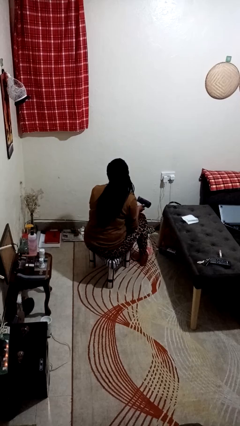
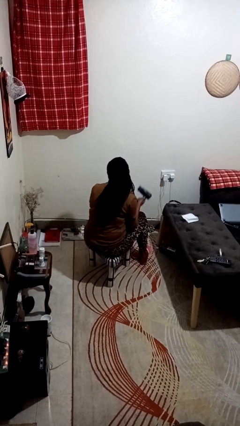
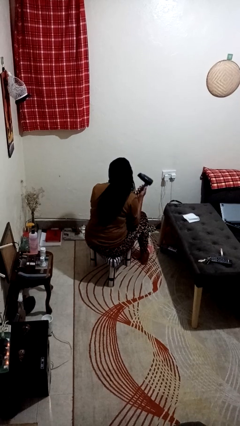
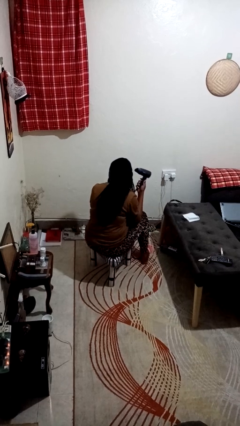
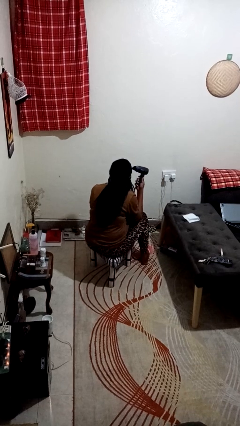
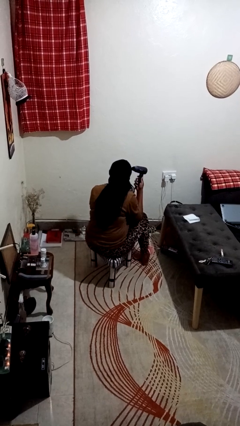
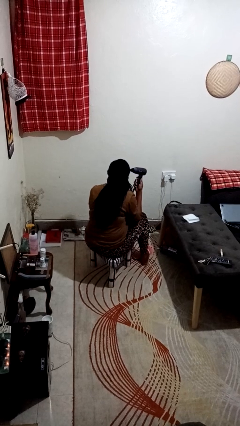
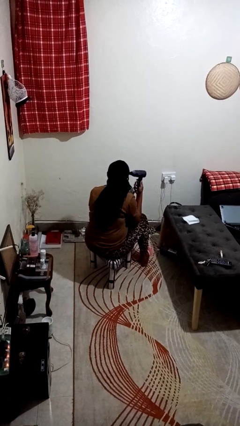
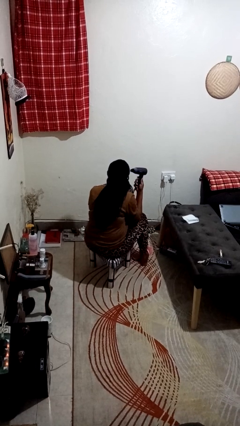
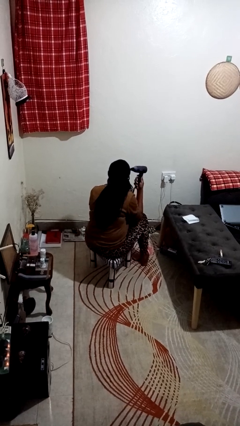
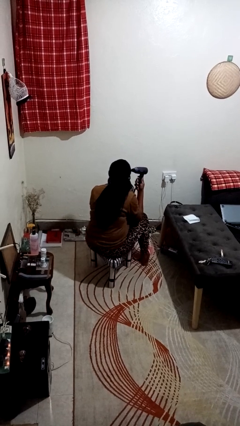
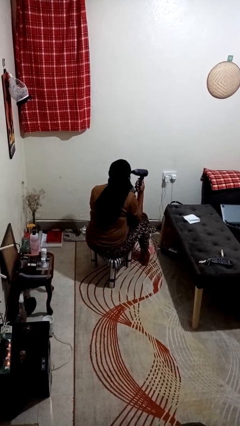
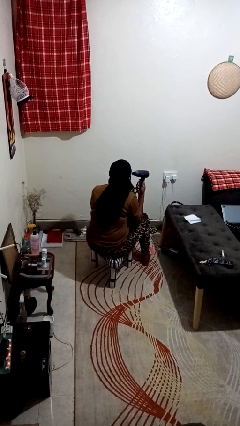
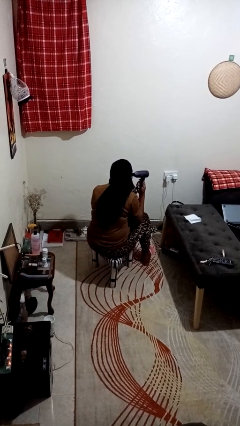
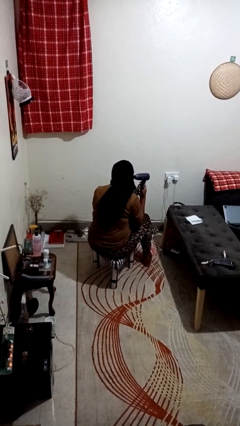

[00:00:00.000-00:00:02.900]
person dries hair with hairdryer

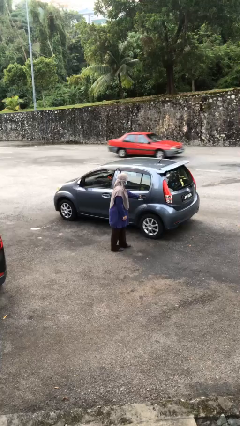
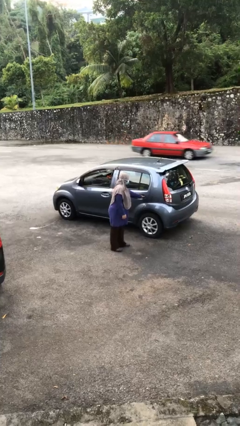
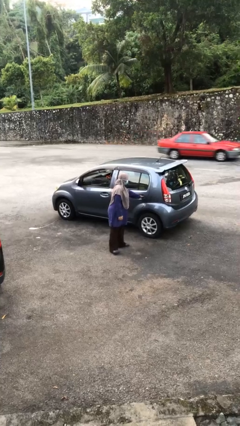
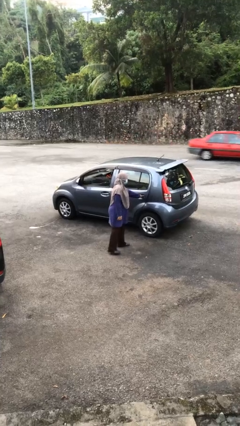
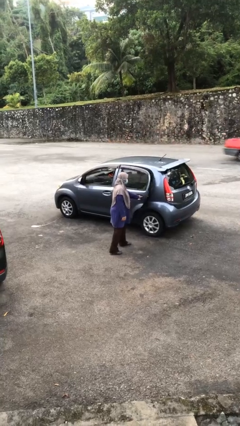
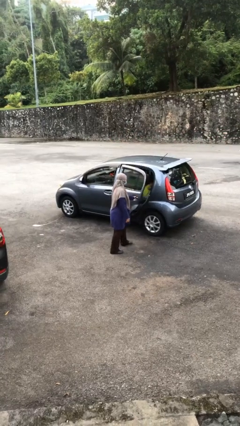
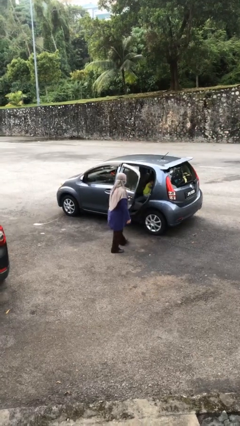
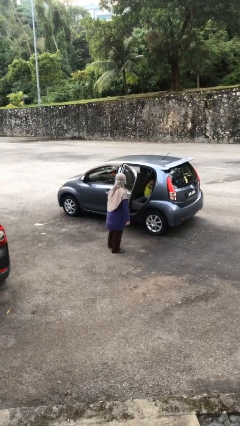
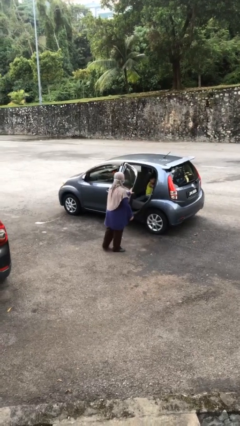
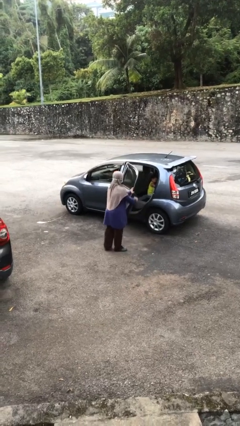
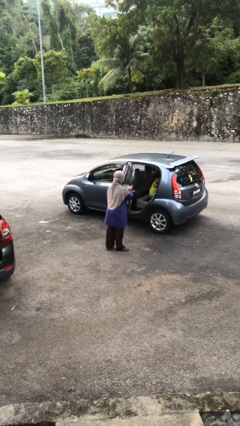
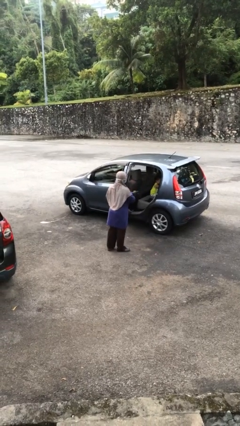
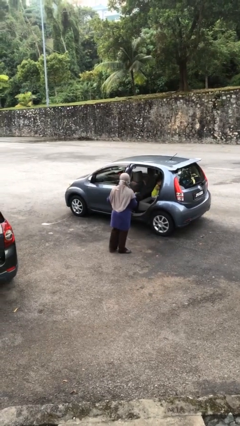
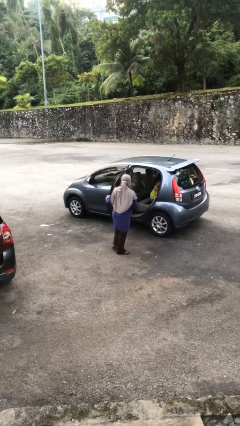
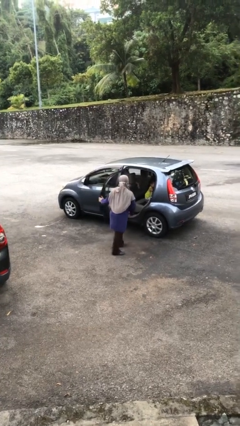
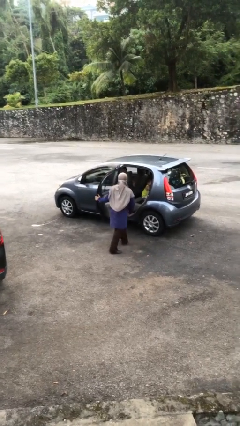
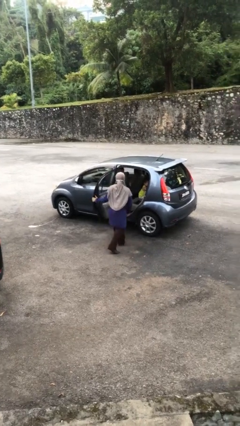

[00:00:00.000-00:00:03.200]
person opens car door

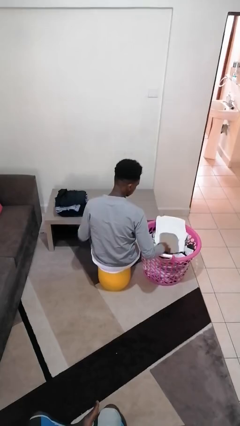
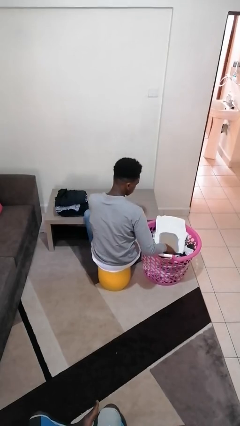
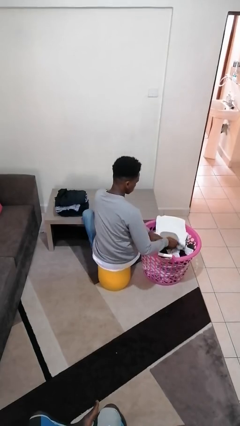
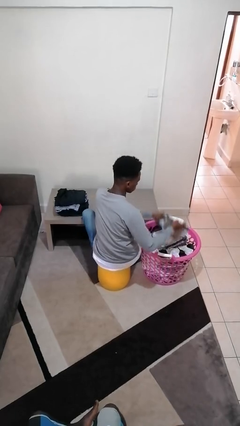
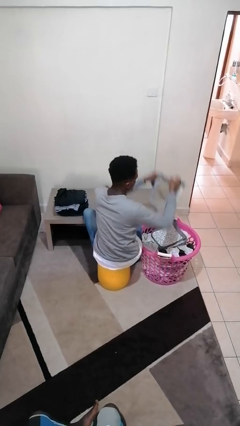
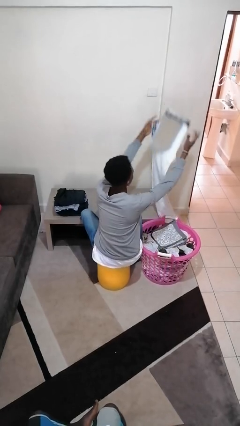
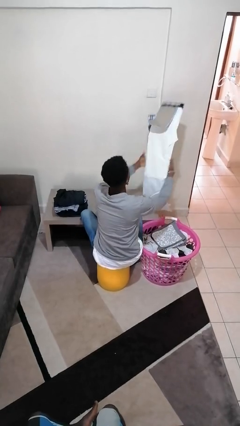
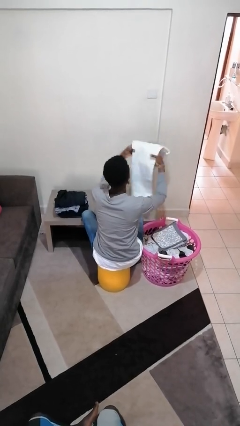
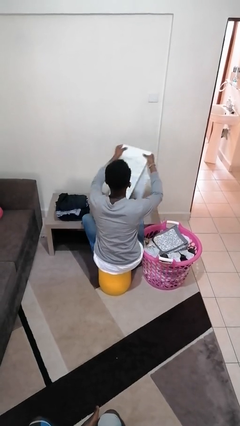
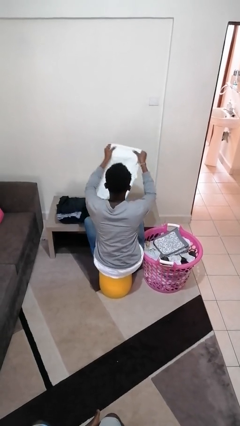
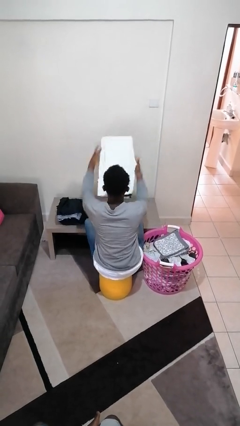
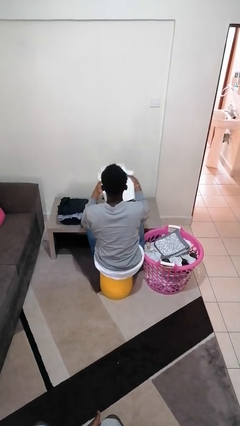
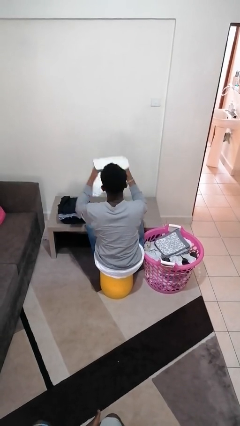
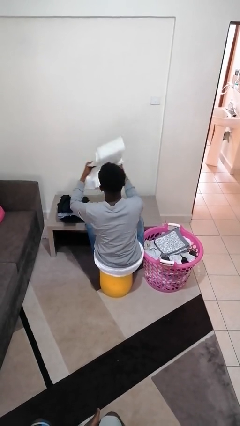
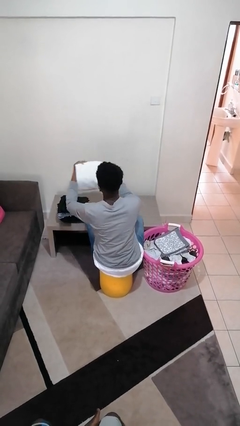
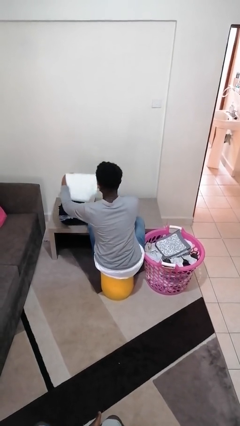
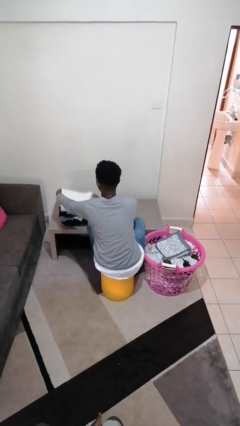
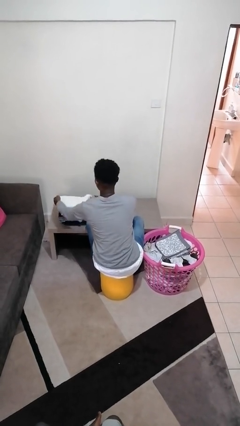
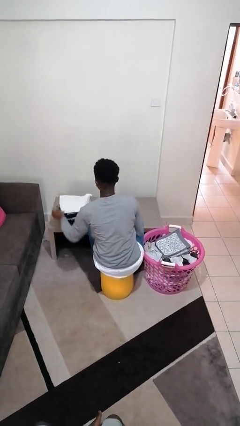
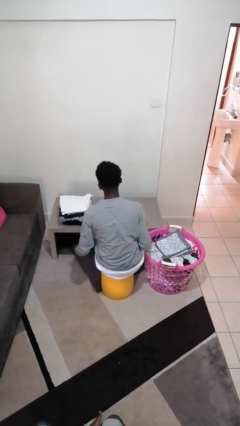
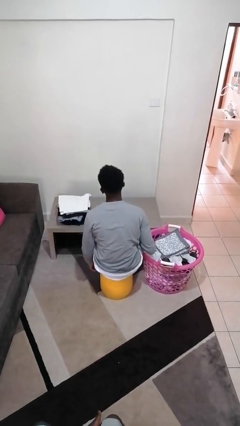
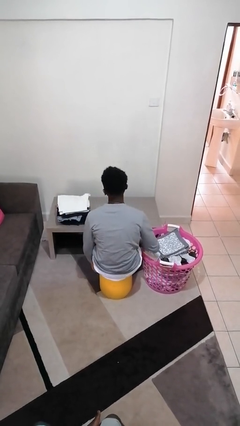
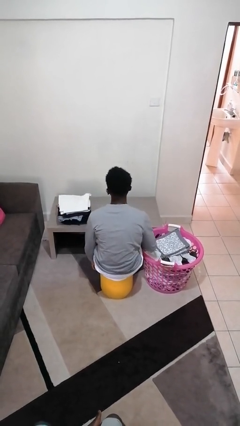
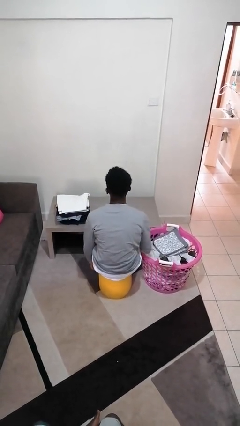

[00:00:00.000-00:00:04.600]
person folds pants

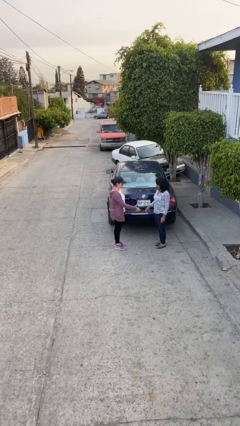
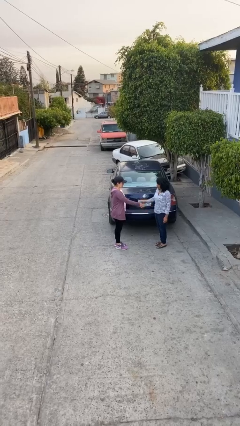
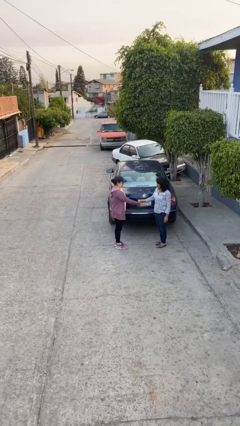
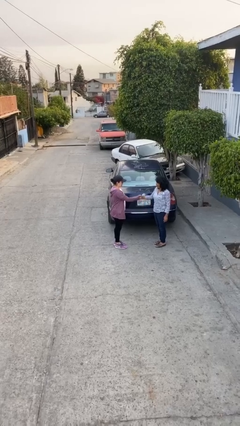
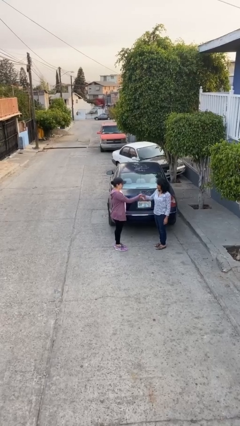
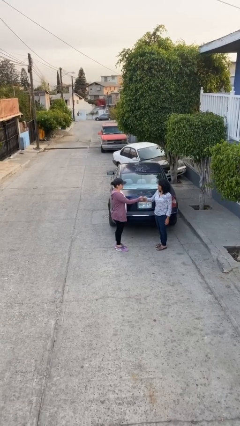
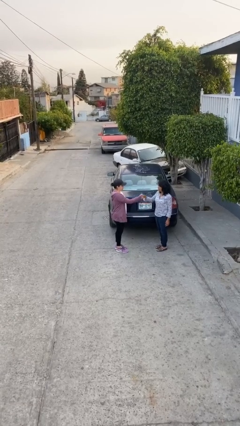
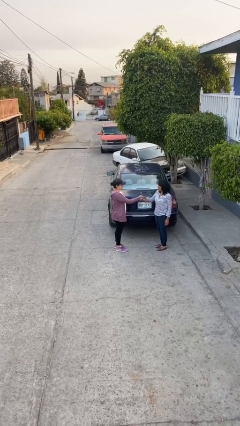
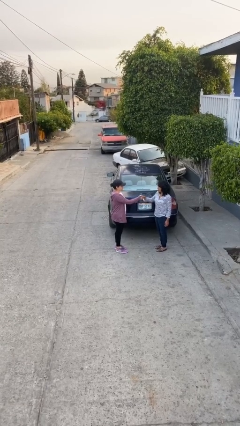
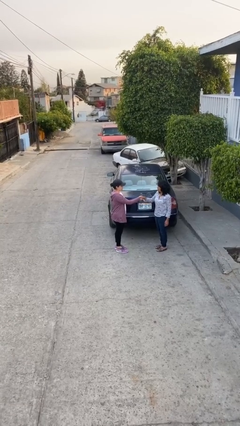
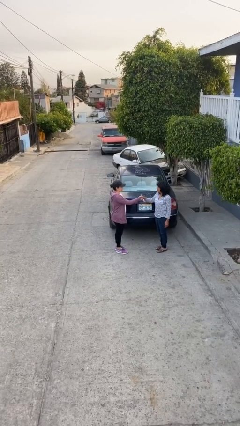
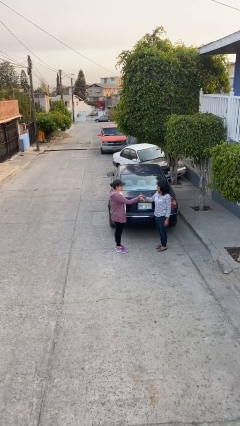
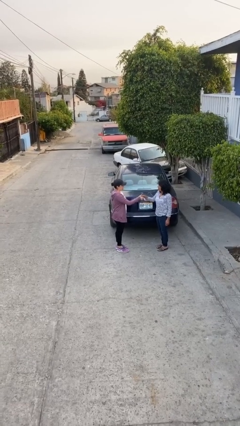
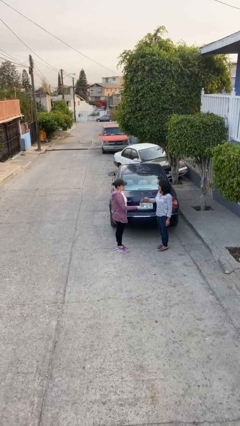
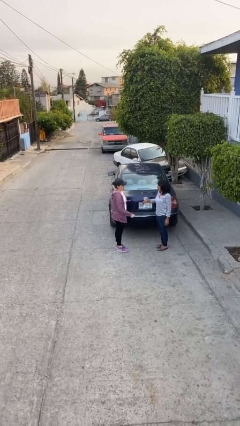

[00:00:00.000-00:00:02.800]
person shakes hand

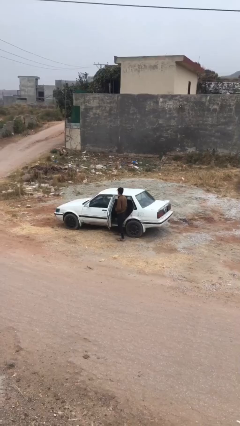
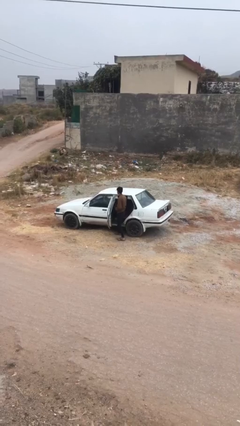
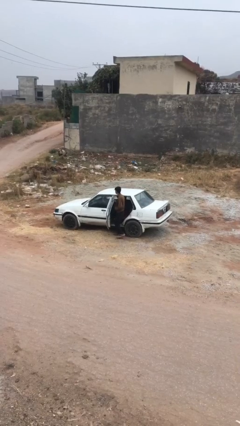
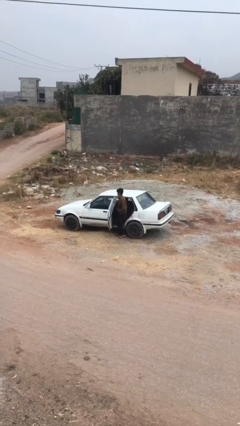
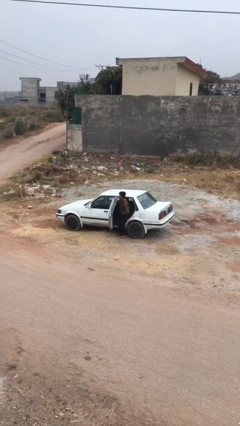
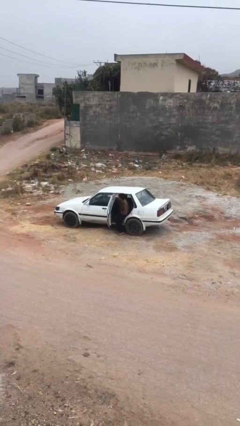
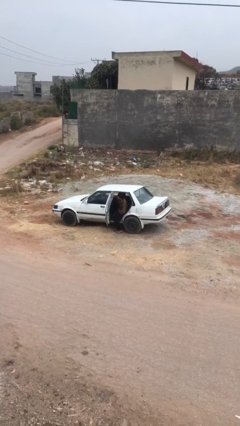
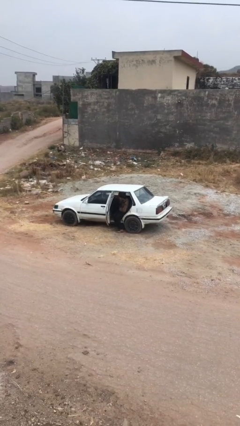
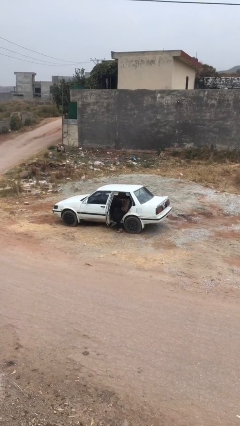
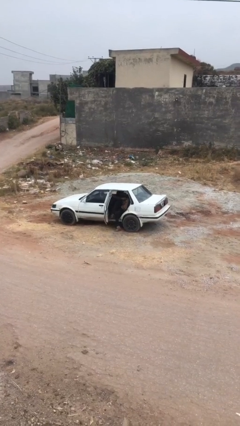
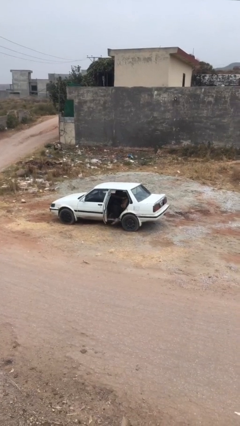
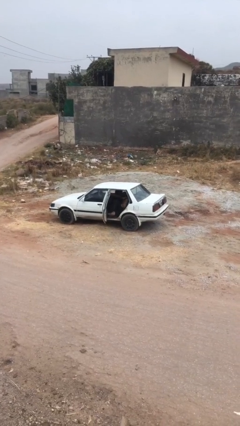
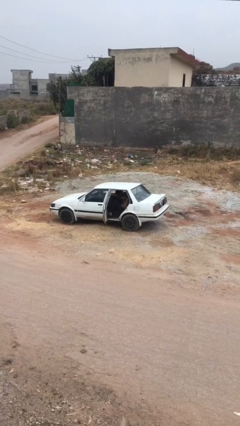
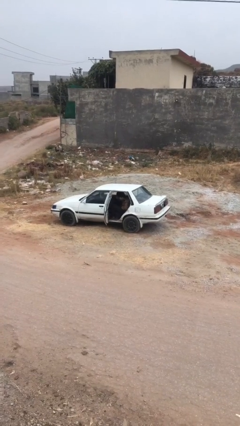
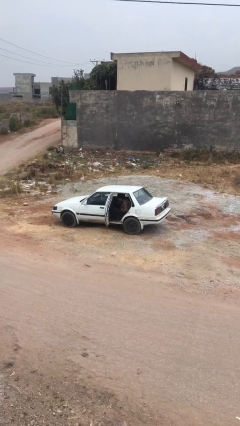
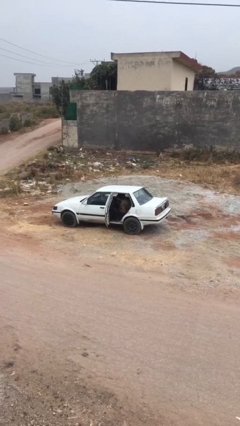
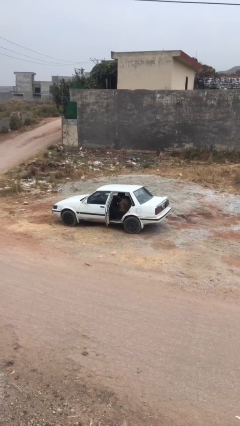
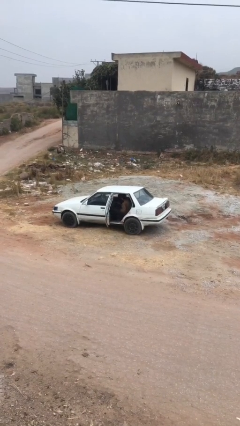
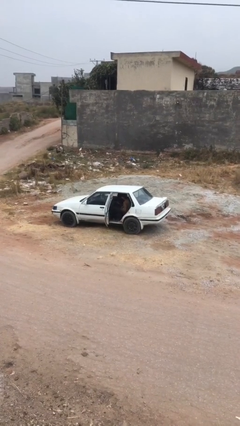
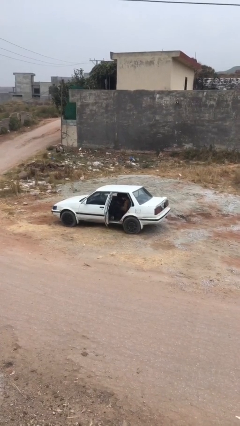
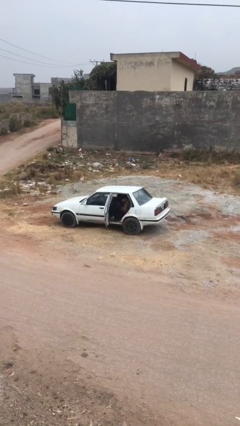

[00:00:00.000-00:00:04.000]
person enters car
